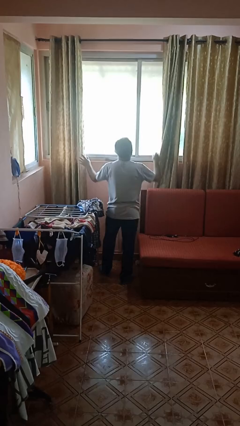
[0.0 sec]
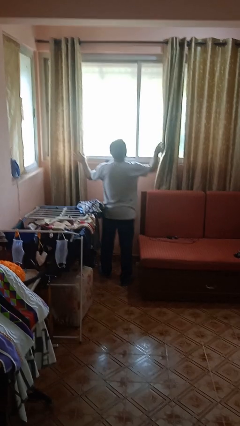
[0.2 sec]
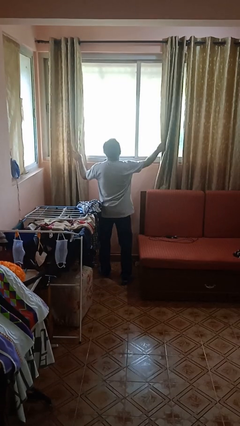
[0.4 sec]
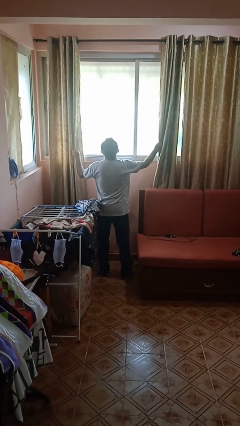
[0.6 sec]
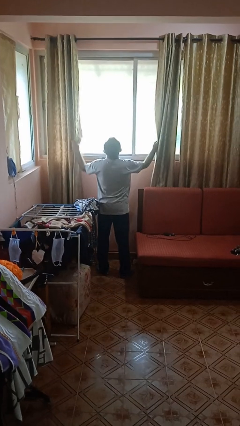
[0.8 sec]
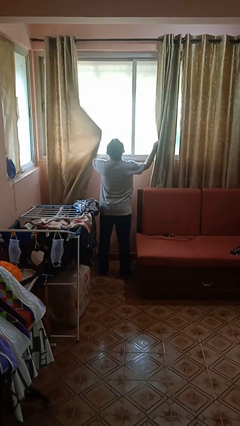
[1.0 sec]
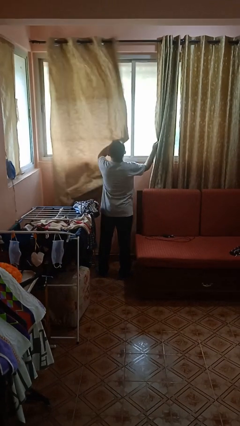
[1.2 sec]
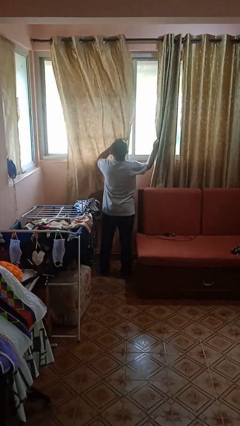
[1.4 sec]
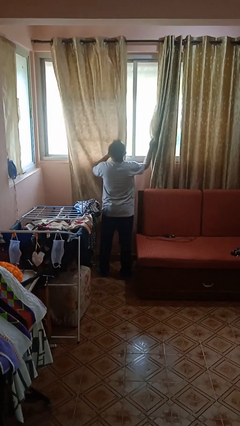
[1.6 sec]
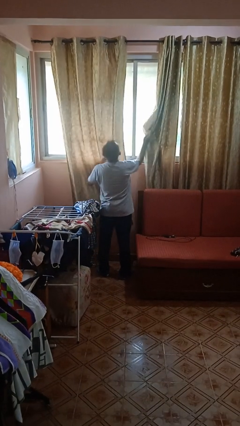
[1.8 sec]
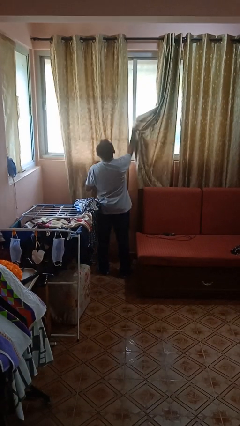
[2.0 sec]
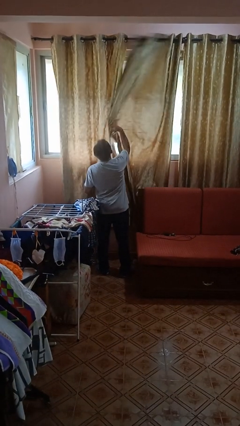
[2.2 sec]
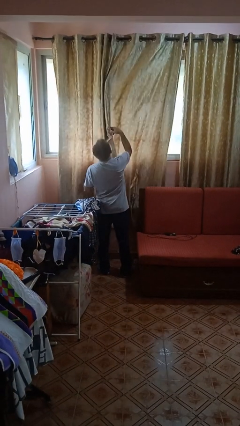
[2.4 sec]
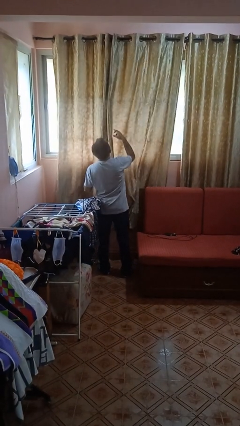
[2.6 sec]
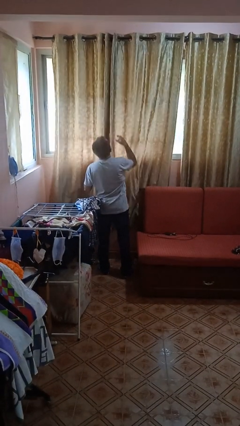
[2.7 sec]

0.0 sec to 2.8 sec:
person closes curtains

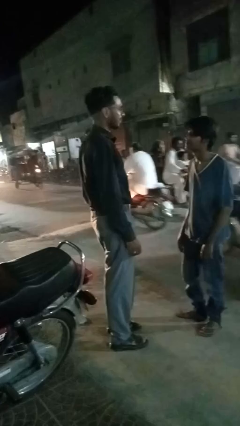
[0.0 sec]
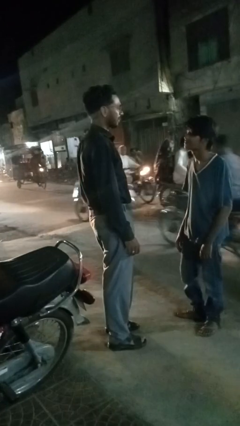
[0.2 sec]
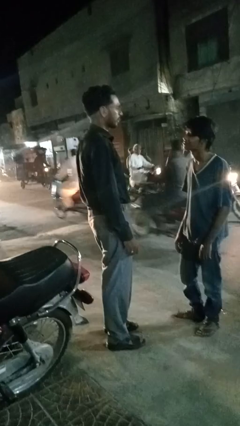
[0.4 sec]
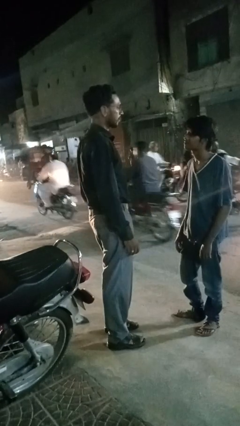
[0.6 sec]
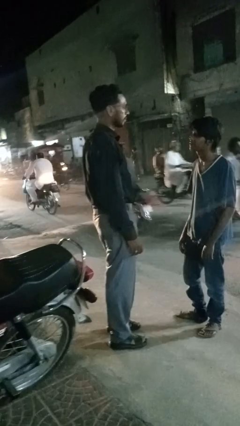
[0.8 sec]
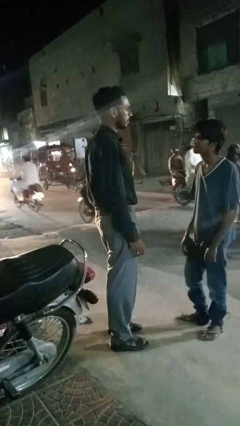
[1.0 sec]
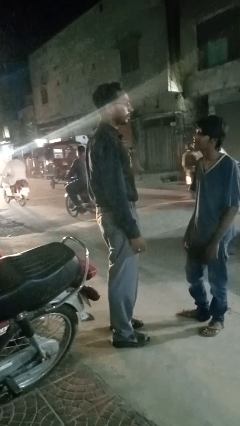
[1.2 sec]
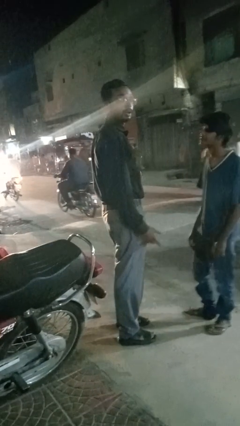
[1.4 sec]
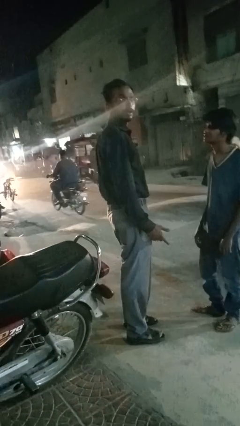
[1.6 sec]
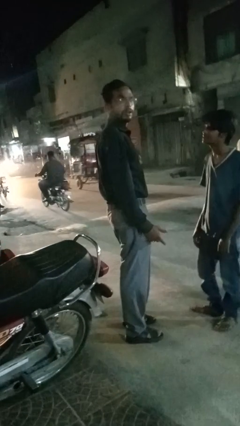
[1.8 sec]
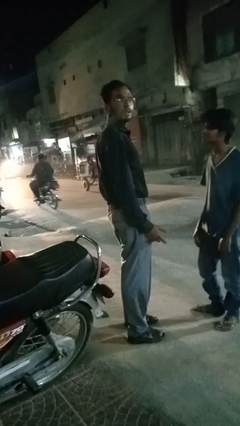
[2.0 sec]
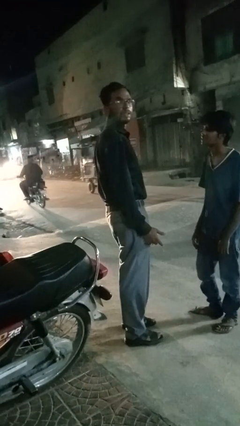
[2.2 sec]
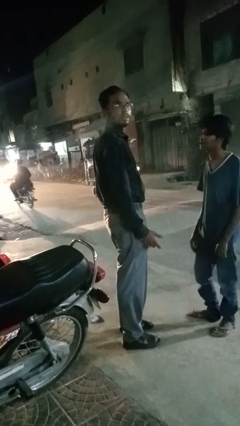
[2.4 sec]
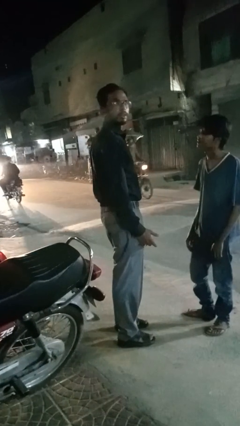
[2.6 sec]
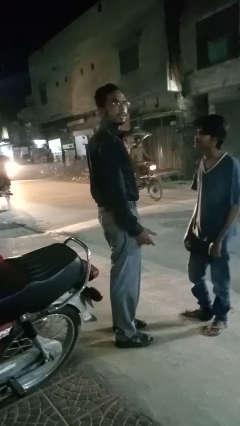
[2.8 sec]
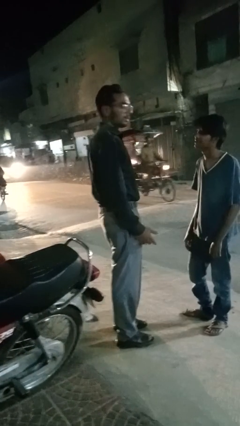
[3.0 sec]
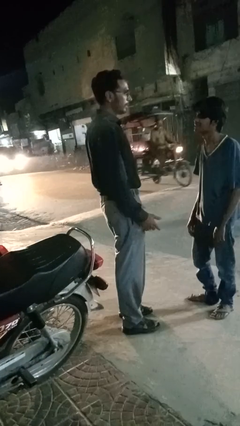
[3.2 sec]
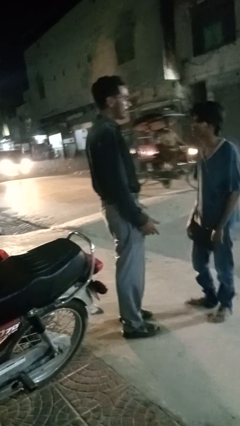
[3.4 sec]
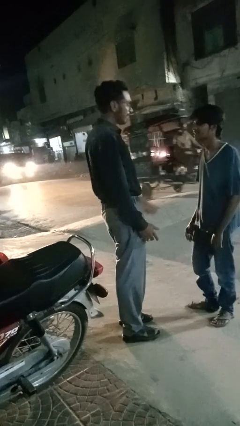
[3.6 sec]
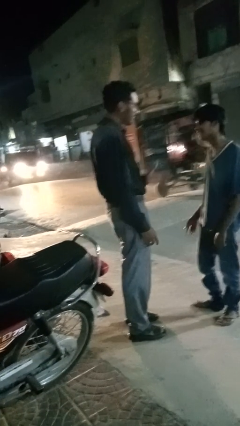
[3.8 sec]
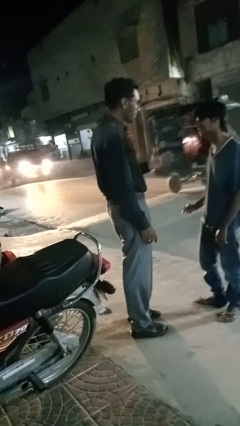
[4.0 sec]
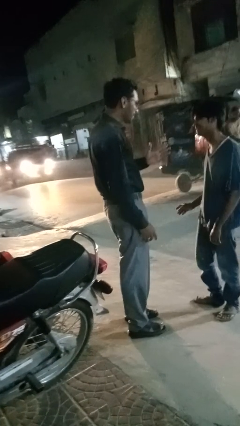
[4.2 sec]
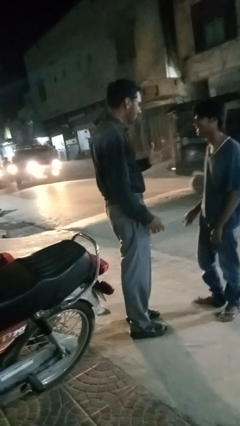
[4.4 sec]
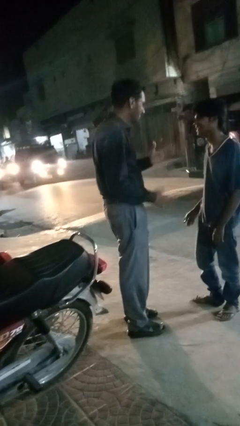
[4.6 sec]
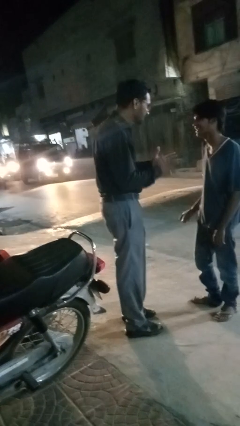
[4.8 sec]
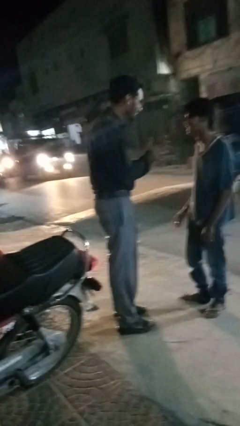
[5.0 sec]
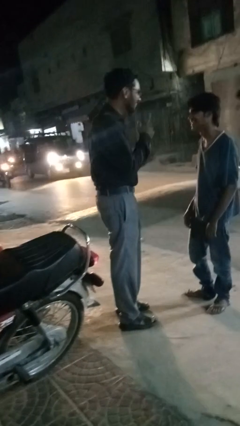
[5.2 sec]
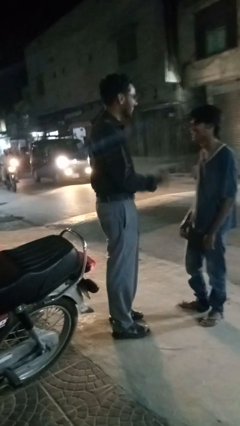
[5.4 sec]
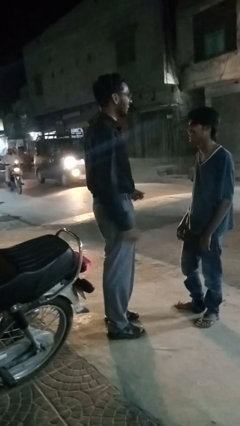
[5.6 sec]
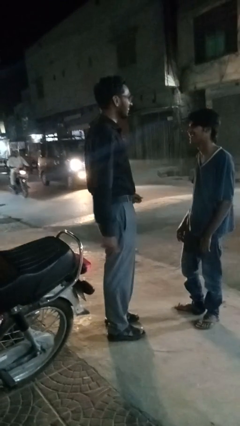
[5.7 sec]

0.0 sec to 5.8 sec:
person talks to person

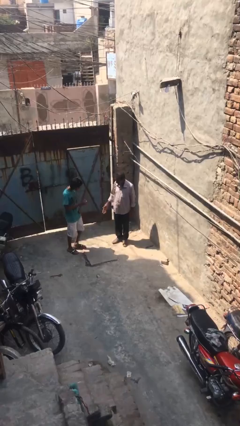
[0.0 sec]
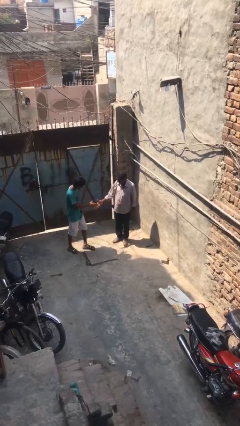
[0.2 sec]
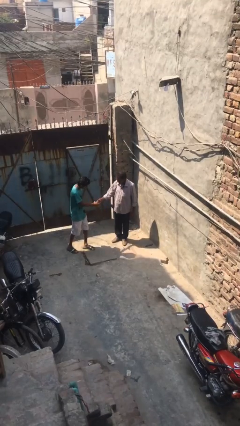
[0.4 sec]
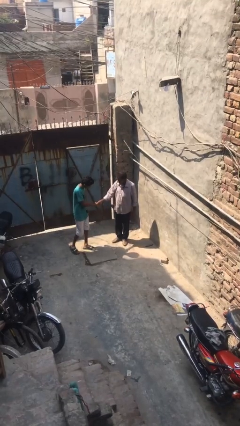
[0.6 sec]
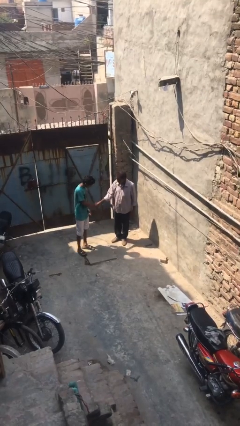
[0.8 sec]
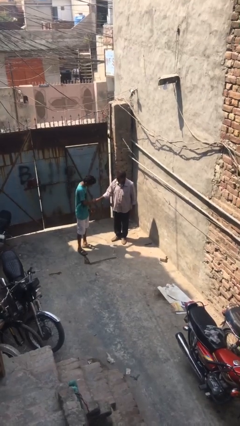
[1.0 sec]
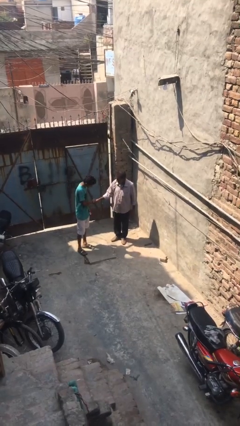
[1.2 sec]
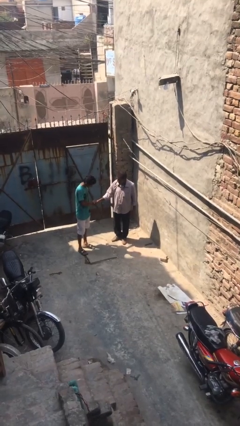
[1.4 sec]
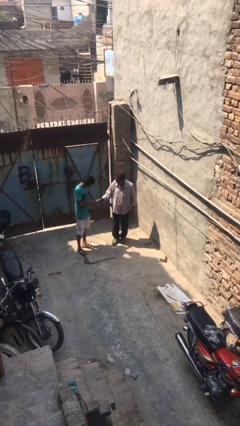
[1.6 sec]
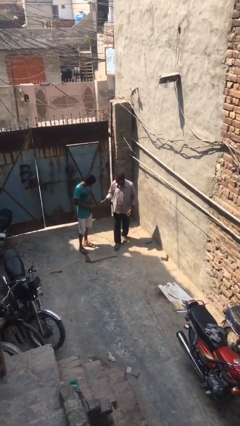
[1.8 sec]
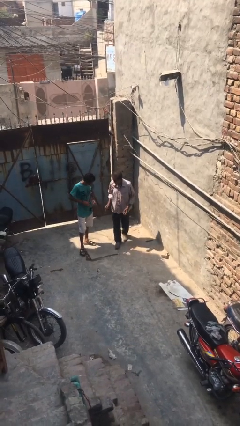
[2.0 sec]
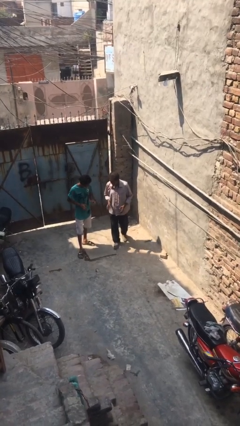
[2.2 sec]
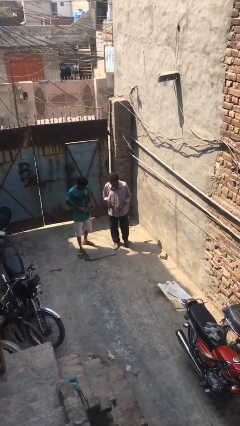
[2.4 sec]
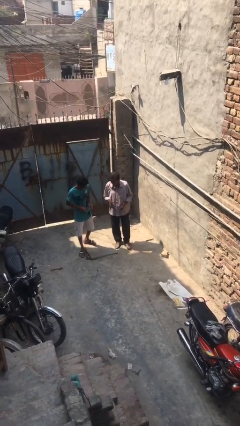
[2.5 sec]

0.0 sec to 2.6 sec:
person shakes hand

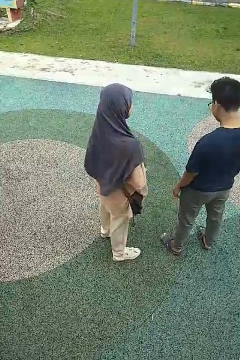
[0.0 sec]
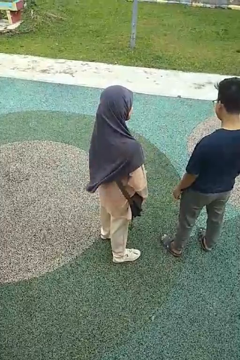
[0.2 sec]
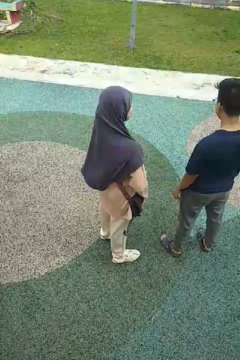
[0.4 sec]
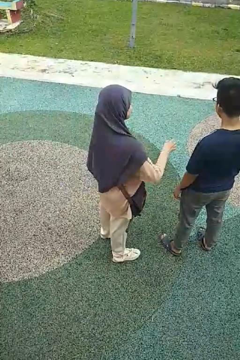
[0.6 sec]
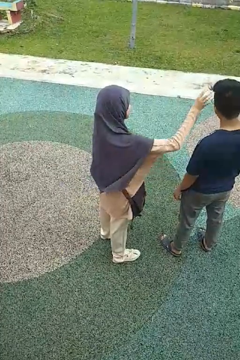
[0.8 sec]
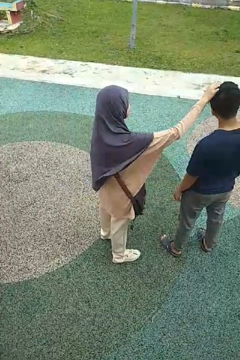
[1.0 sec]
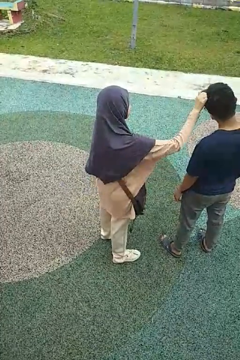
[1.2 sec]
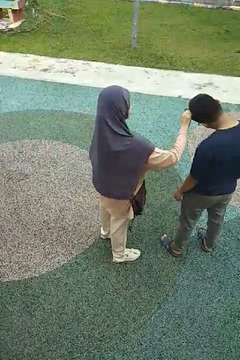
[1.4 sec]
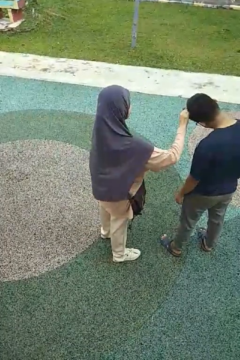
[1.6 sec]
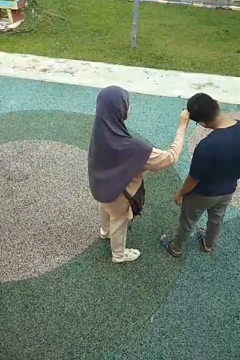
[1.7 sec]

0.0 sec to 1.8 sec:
person grabs person by hair

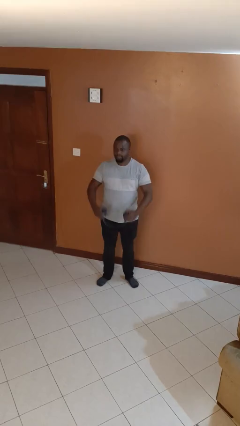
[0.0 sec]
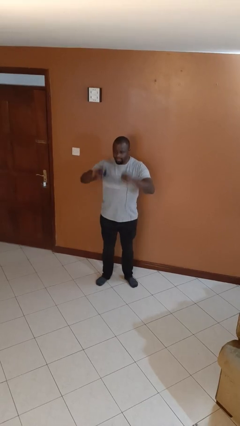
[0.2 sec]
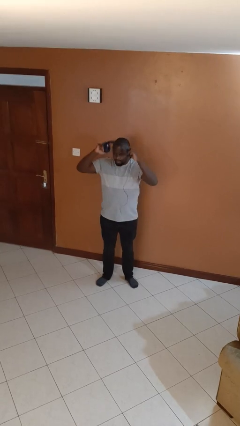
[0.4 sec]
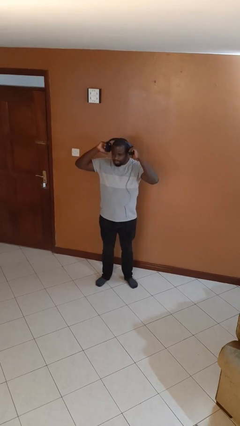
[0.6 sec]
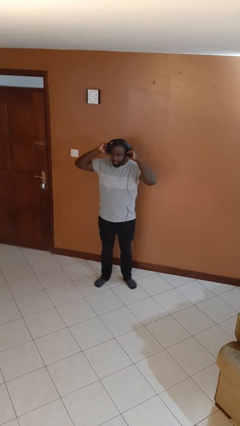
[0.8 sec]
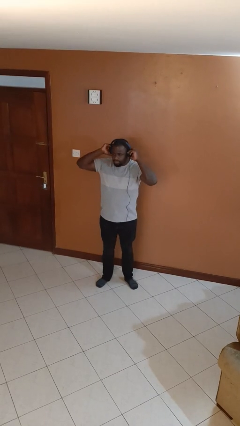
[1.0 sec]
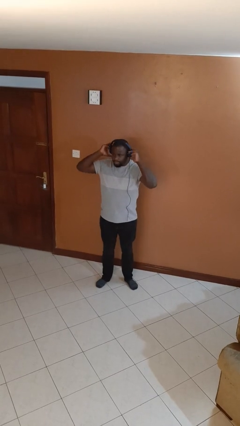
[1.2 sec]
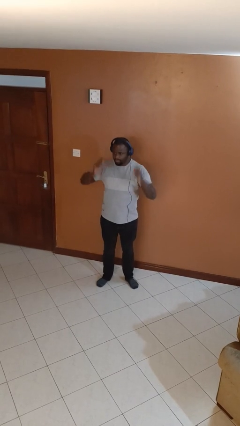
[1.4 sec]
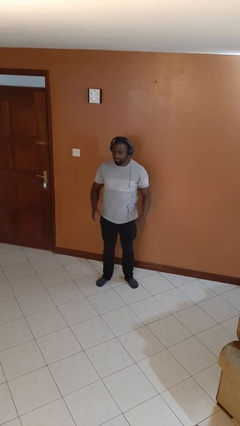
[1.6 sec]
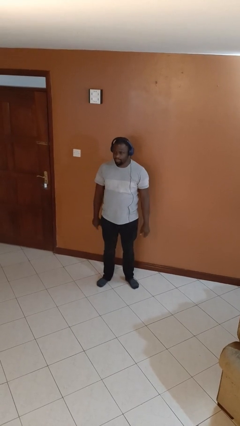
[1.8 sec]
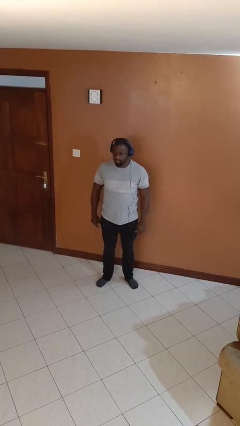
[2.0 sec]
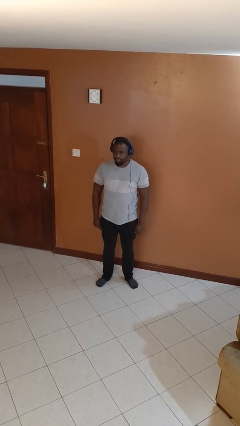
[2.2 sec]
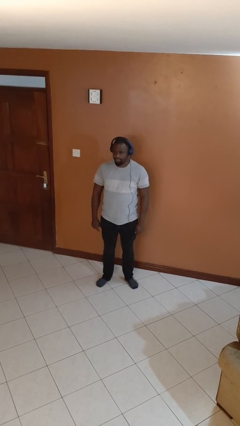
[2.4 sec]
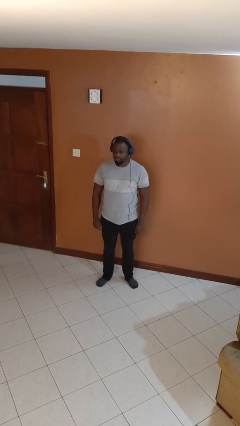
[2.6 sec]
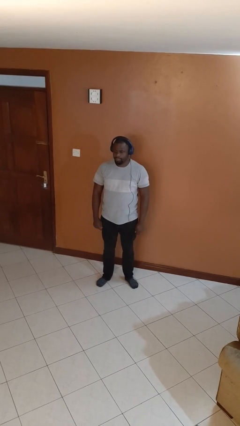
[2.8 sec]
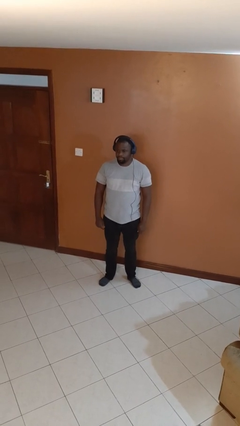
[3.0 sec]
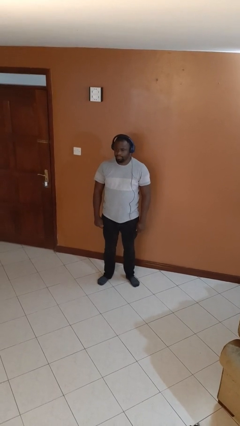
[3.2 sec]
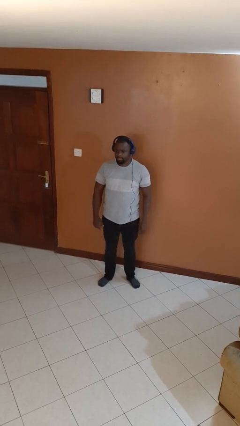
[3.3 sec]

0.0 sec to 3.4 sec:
person puts on headphones

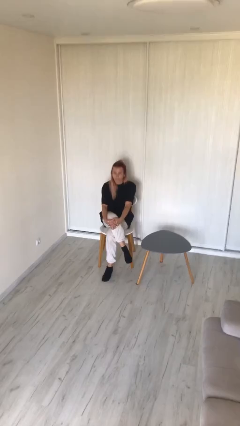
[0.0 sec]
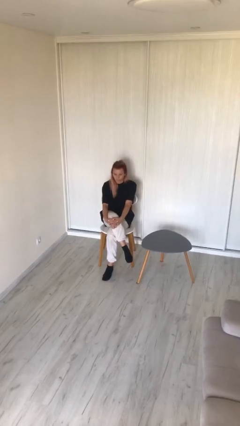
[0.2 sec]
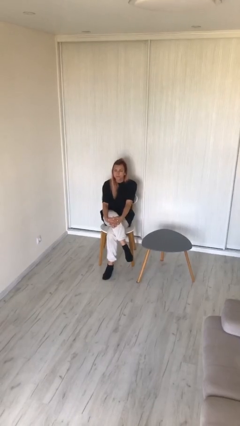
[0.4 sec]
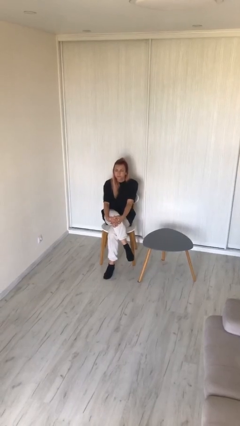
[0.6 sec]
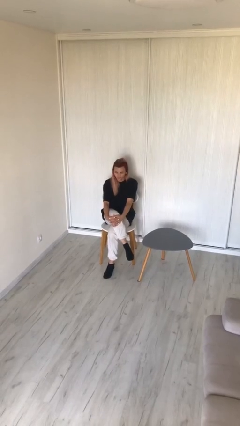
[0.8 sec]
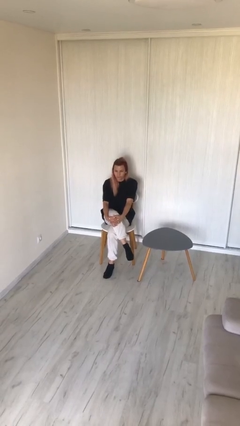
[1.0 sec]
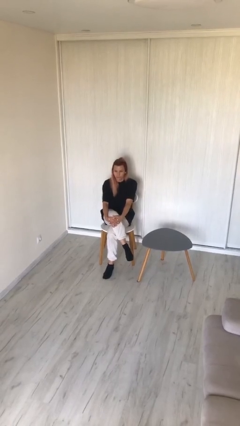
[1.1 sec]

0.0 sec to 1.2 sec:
person nods head

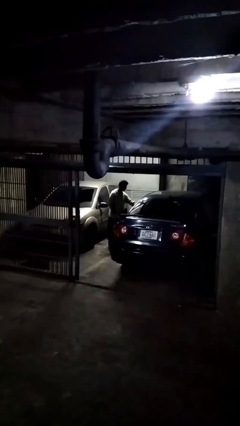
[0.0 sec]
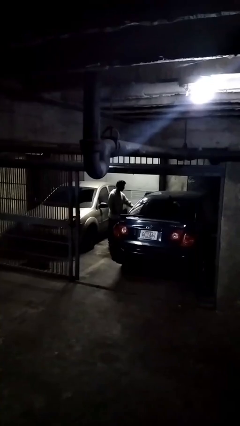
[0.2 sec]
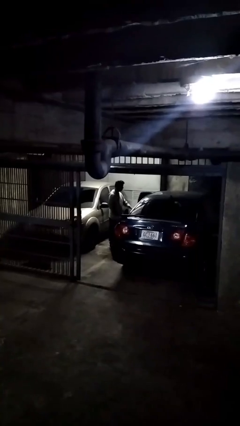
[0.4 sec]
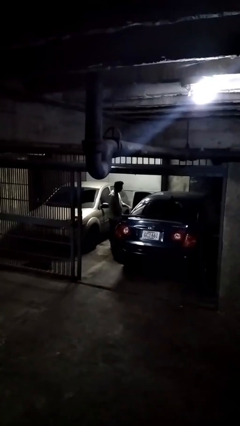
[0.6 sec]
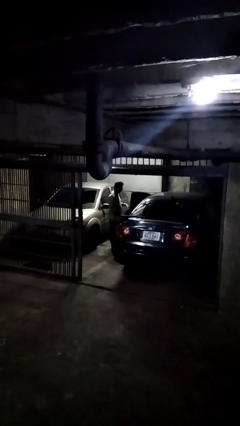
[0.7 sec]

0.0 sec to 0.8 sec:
person opens car door
